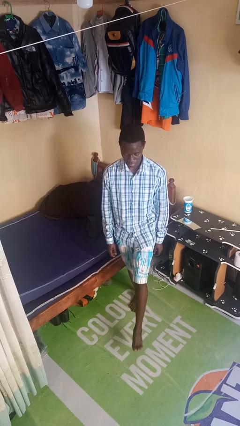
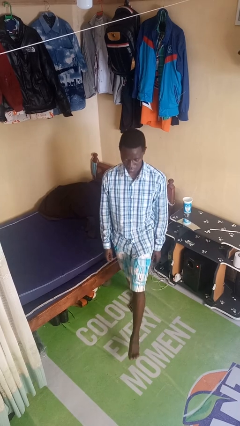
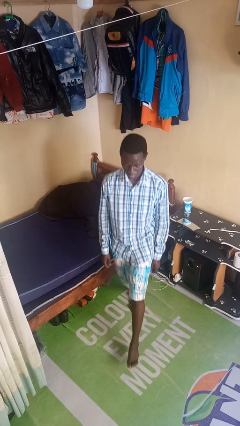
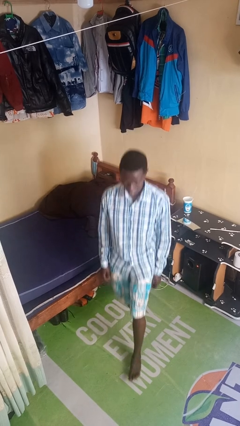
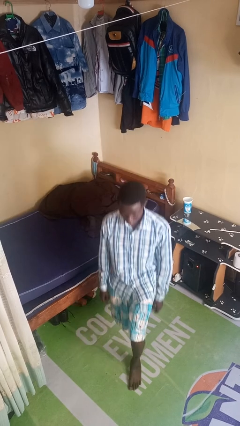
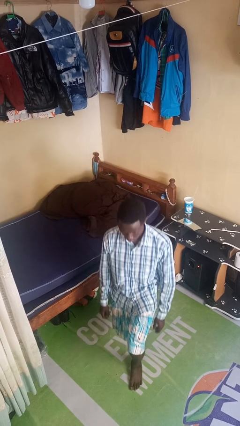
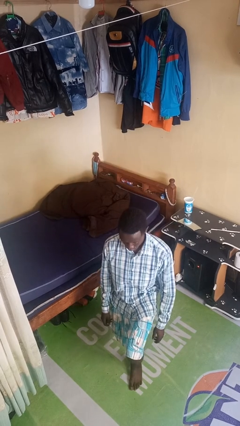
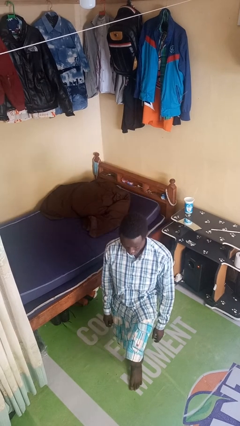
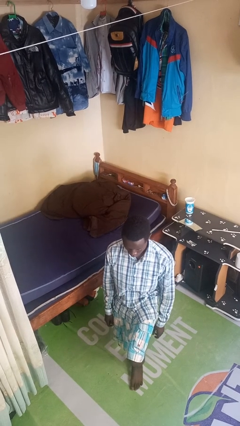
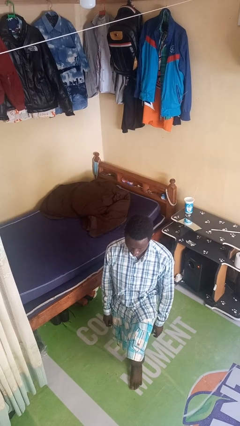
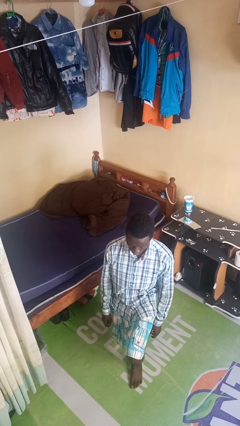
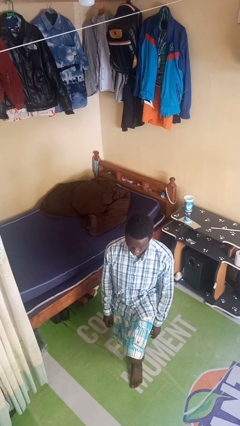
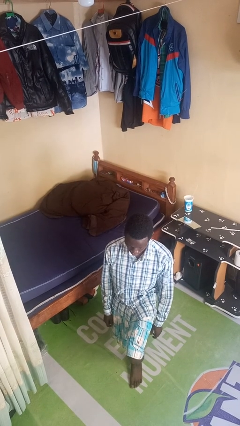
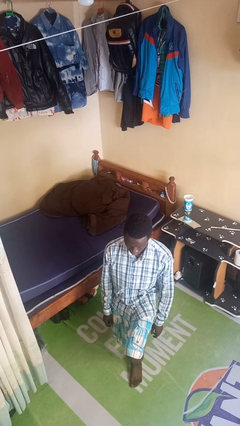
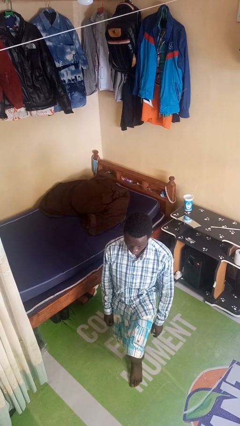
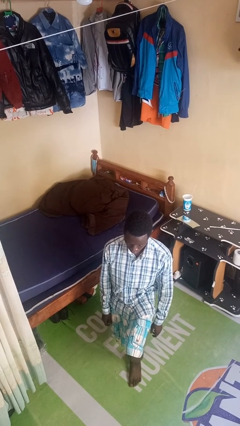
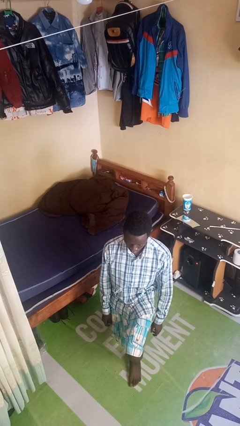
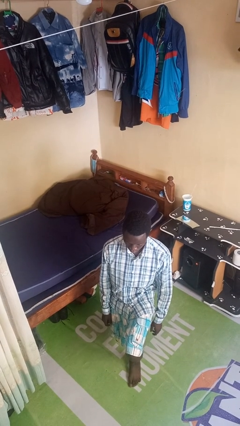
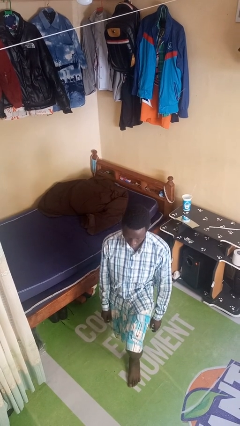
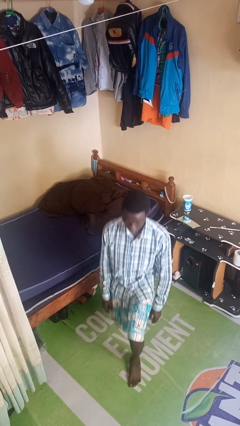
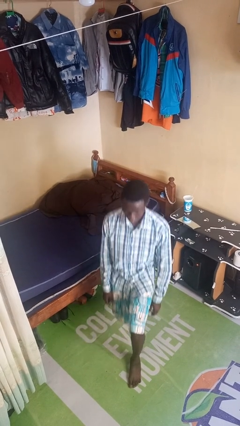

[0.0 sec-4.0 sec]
person exercises with lunges

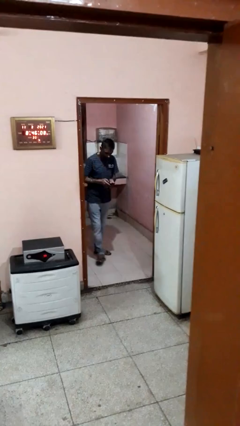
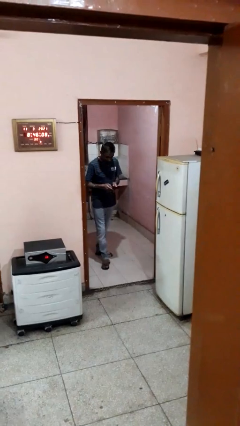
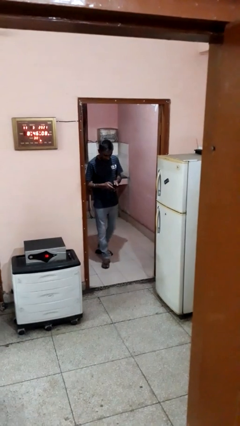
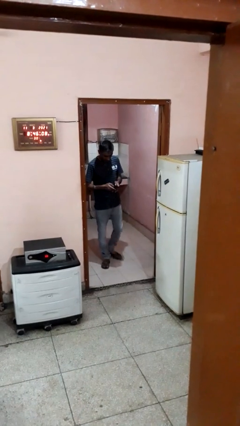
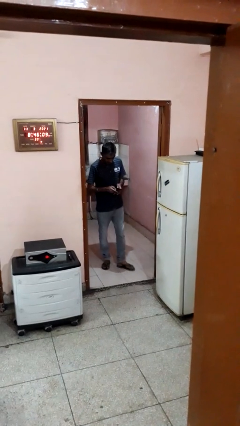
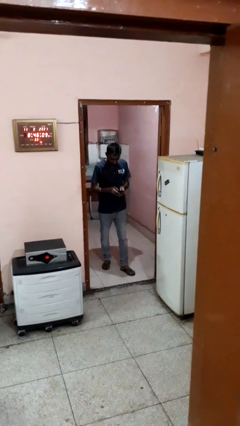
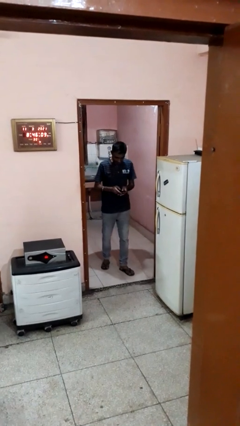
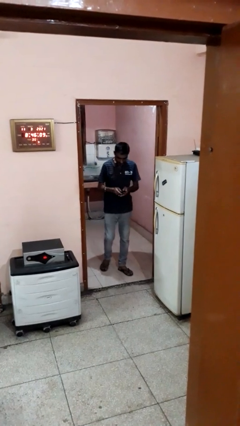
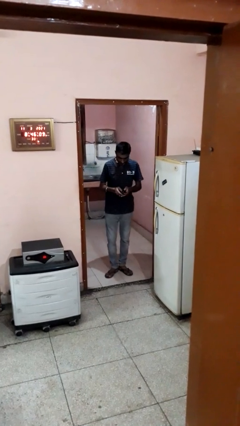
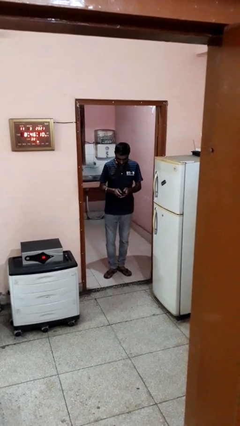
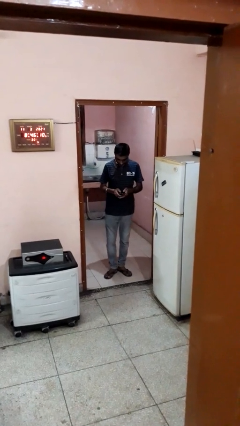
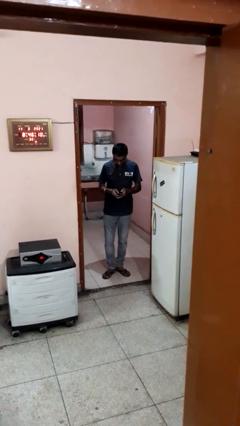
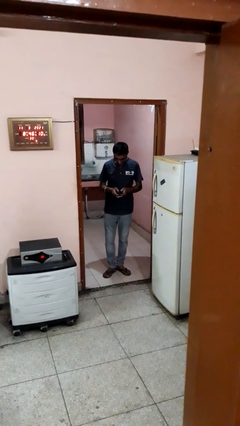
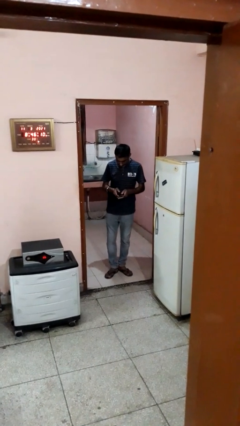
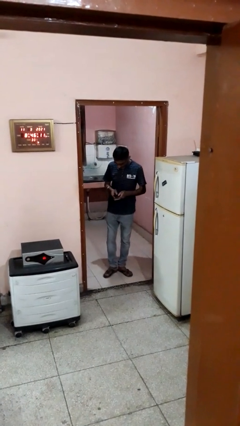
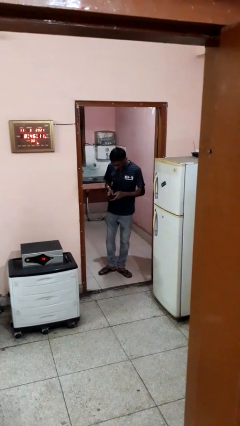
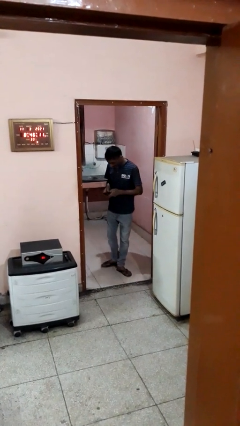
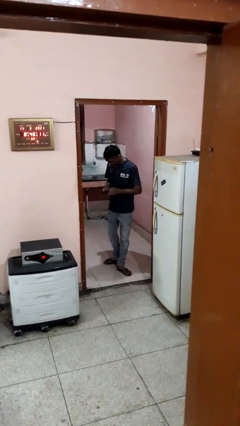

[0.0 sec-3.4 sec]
person enters scene through structure

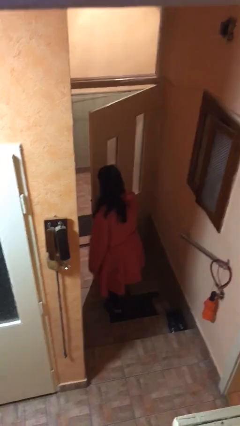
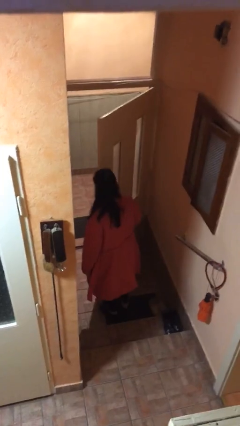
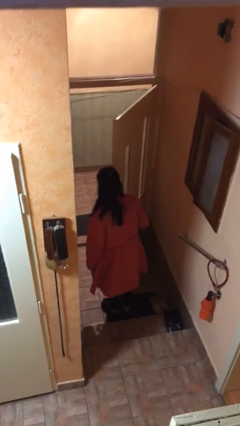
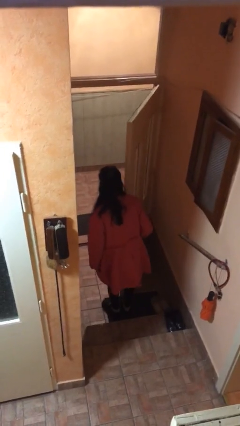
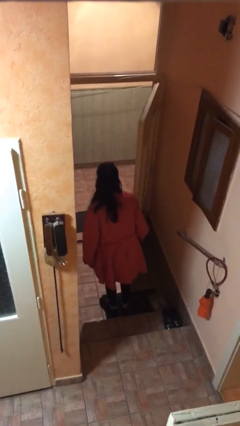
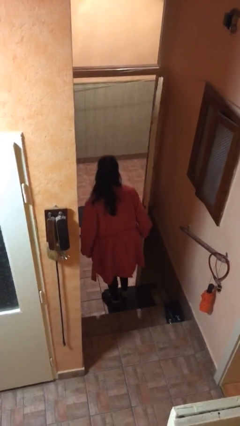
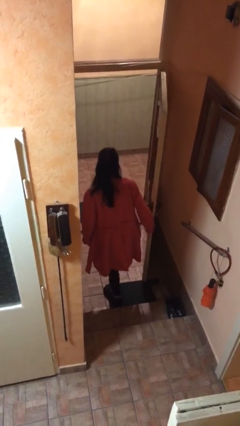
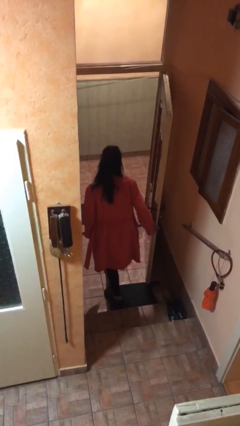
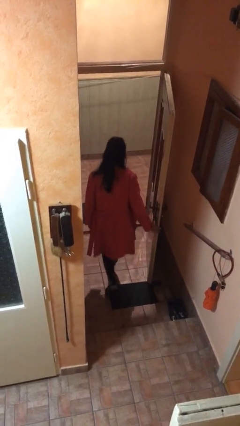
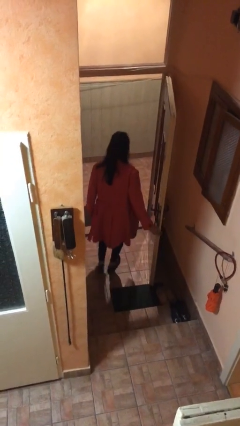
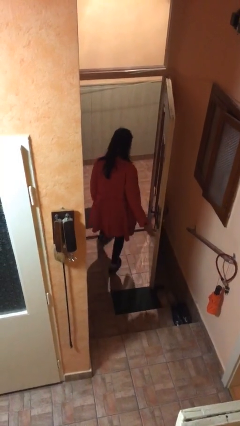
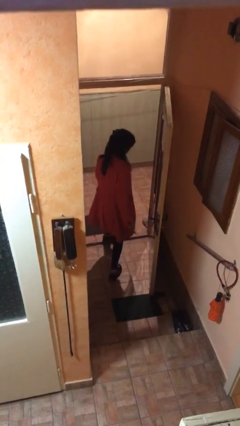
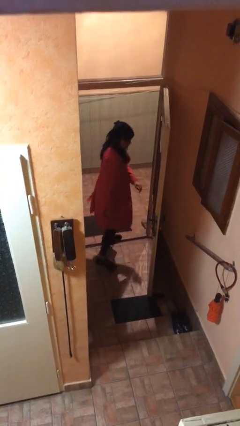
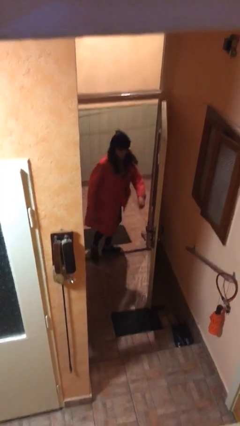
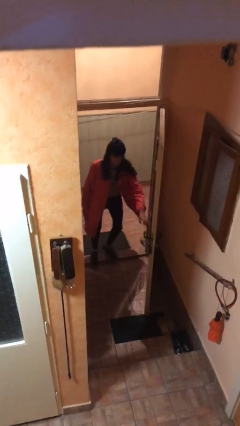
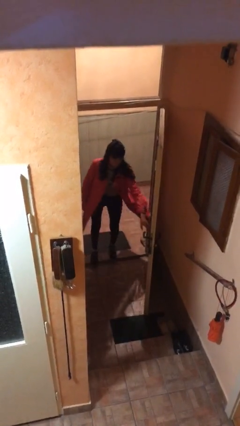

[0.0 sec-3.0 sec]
person exits scene through structure

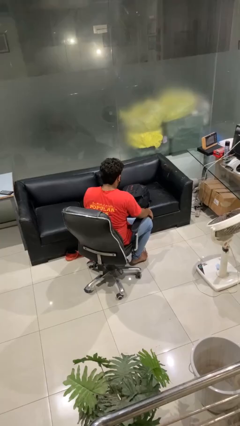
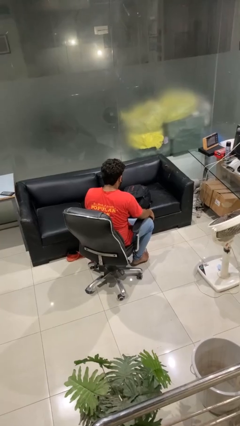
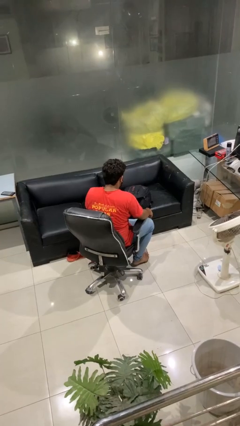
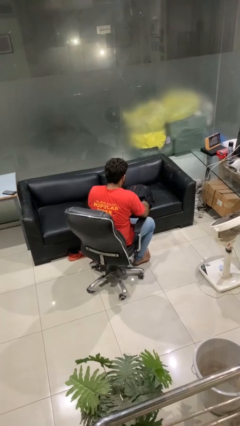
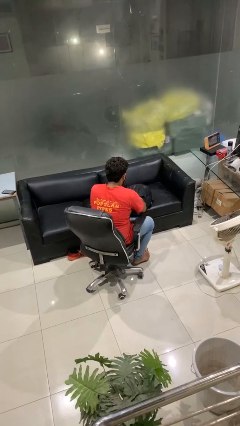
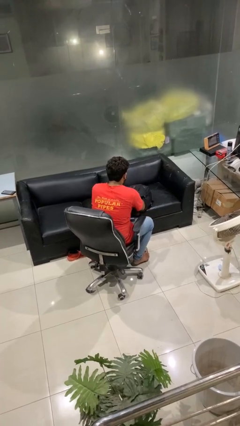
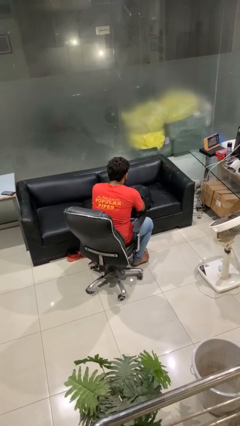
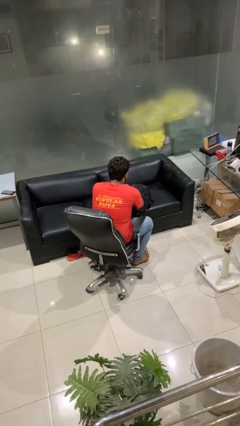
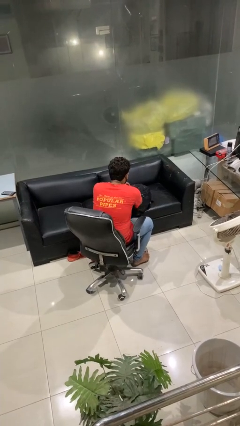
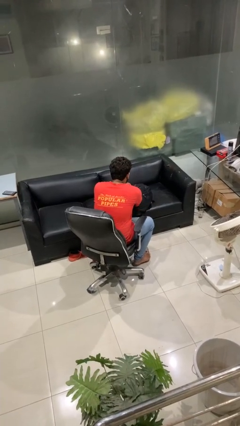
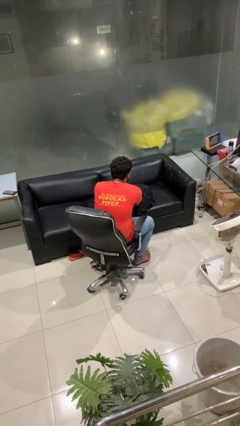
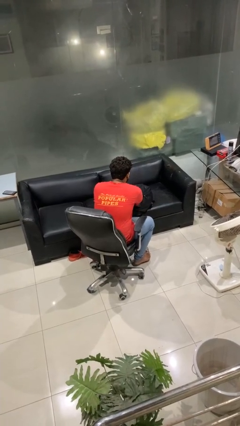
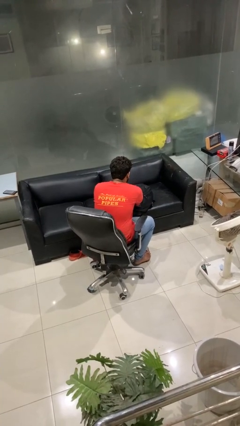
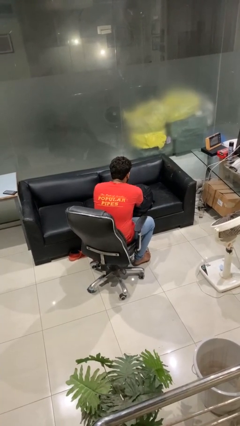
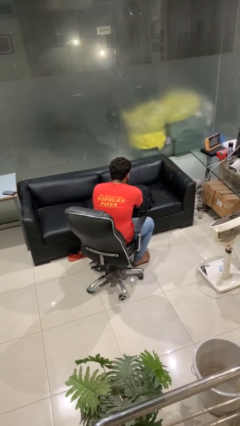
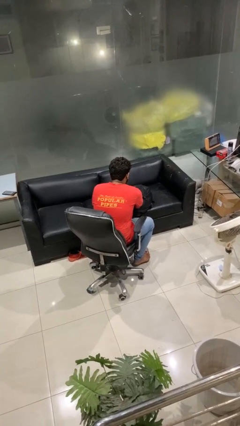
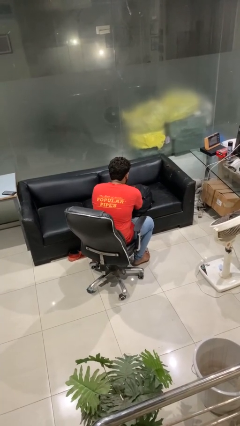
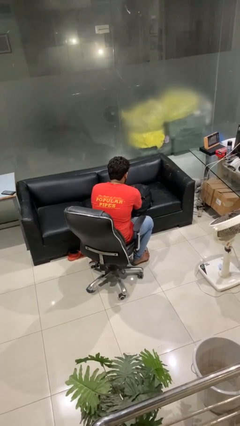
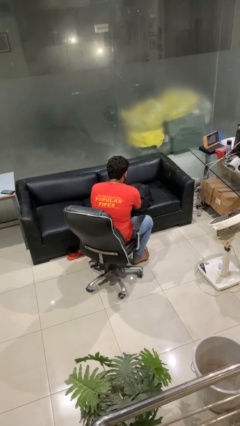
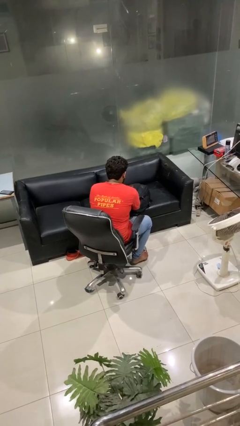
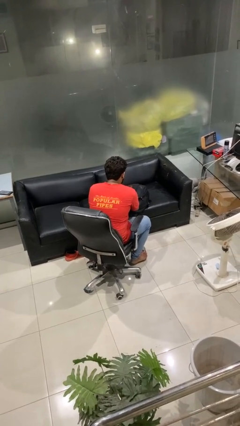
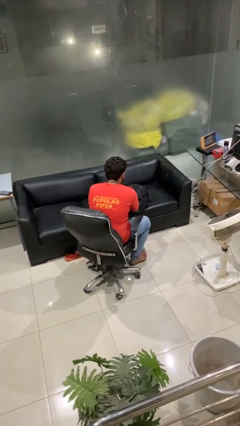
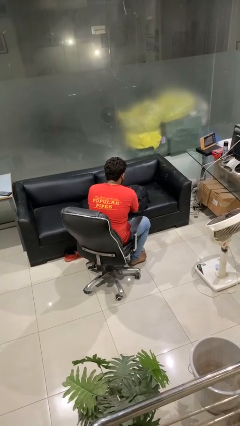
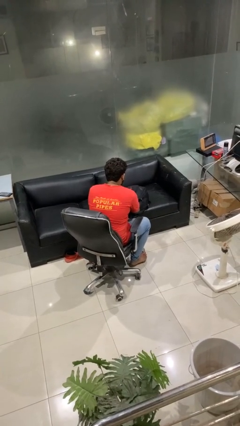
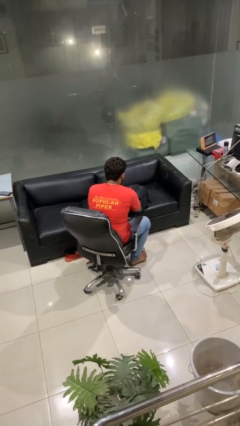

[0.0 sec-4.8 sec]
person searches in backpack

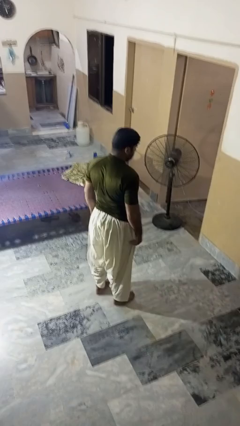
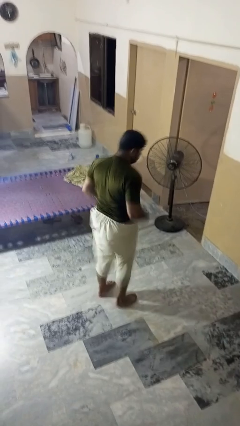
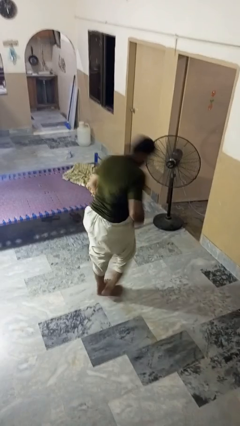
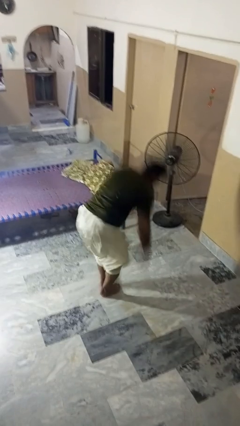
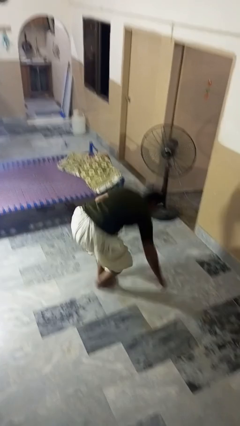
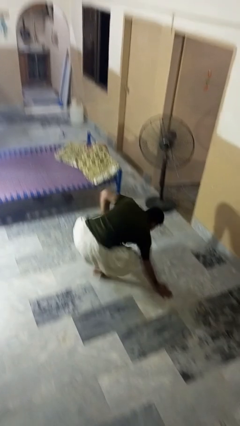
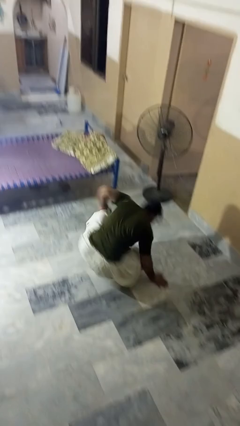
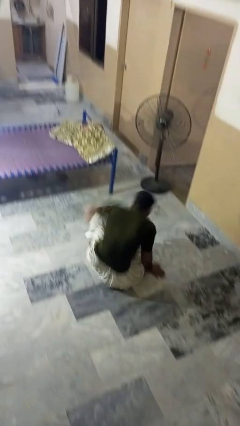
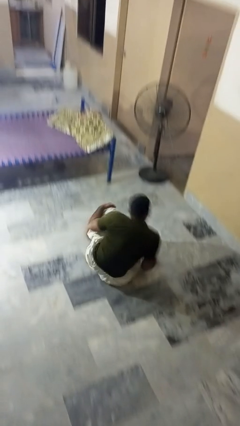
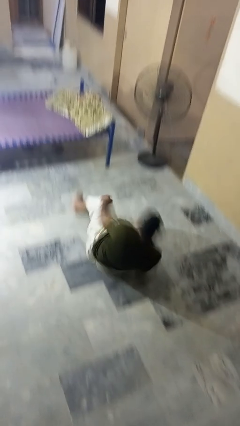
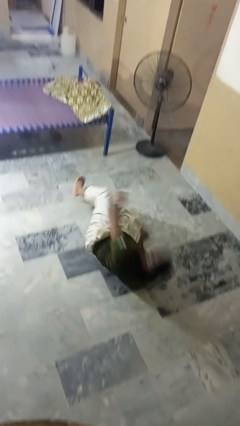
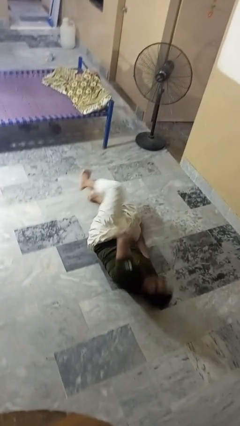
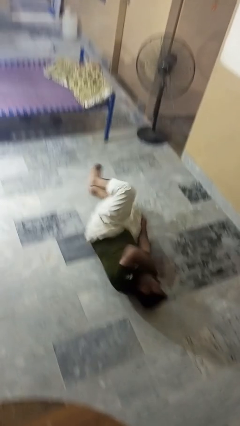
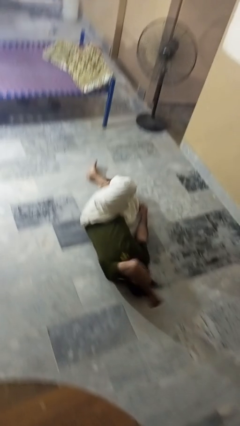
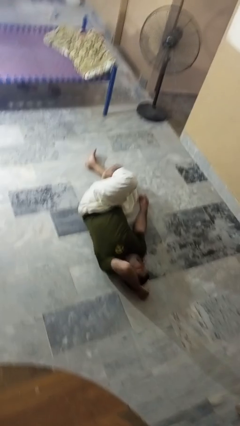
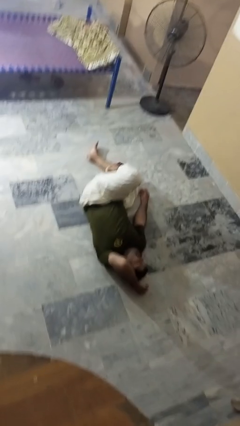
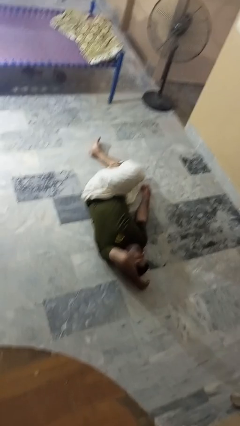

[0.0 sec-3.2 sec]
person falls while standing
